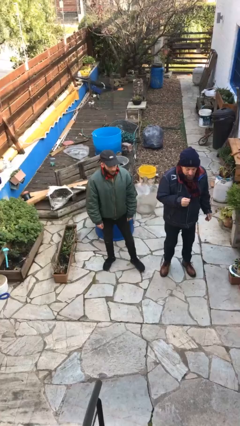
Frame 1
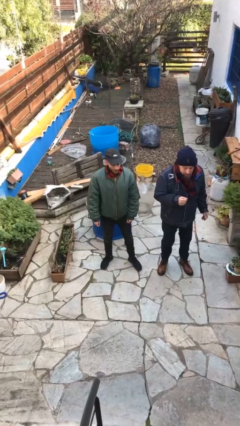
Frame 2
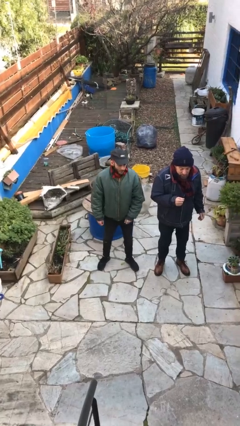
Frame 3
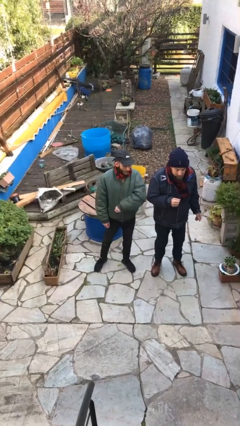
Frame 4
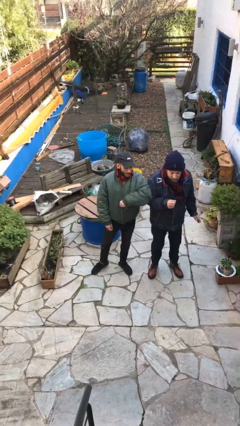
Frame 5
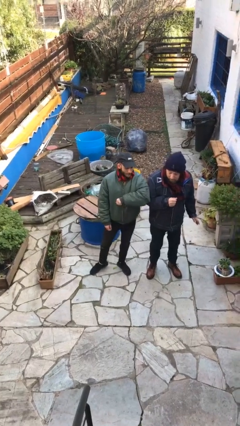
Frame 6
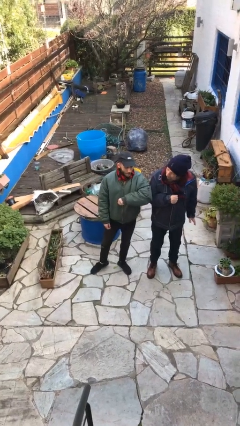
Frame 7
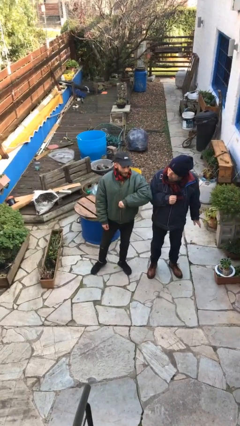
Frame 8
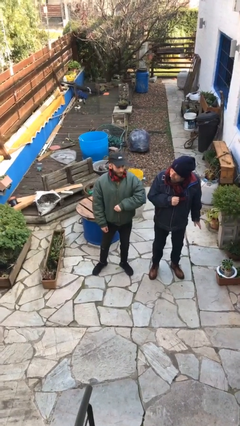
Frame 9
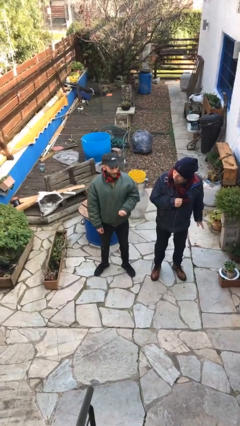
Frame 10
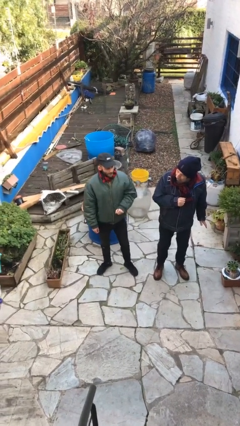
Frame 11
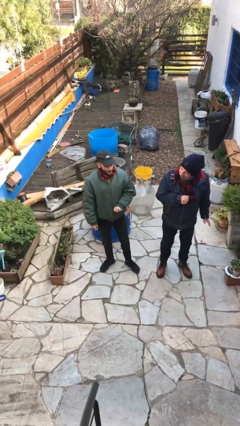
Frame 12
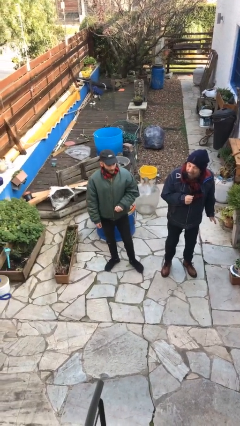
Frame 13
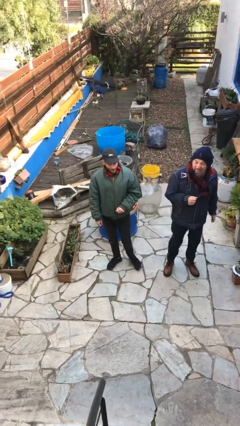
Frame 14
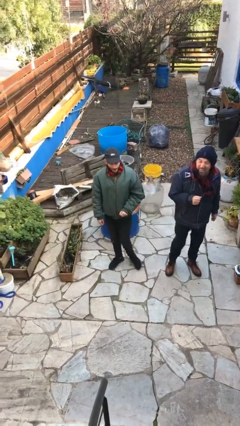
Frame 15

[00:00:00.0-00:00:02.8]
person nudges person with elbow

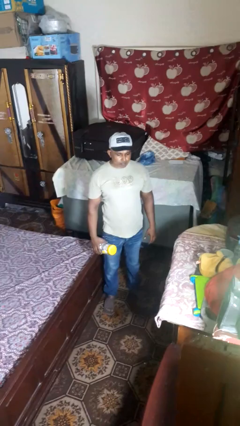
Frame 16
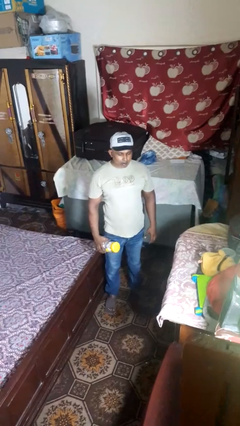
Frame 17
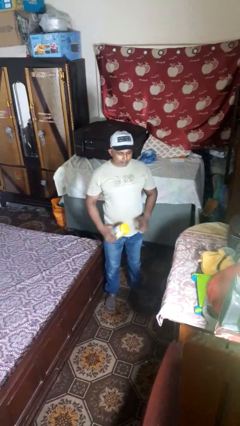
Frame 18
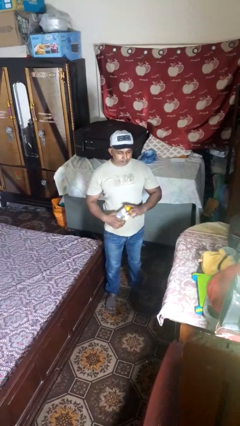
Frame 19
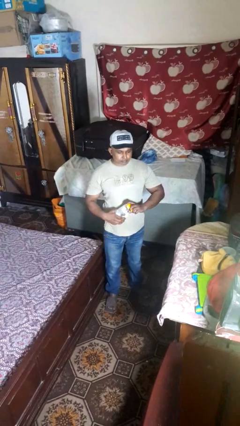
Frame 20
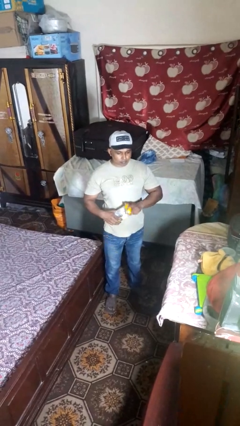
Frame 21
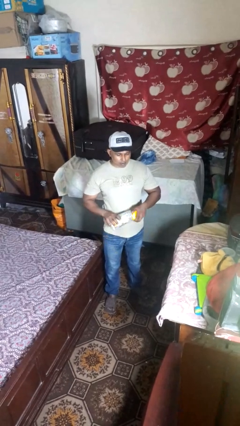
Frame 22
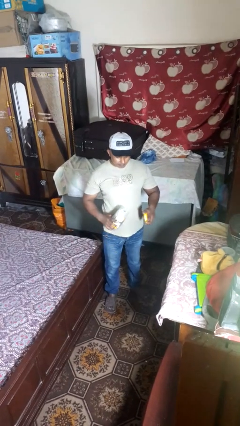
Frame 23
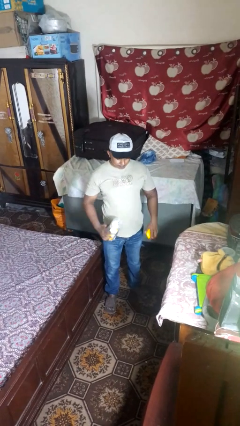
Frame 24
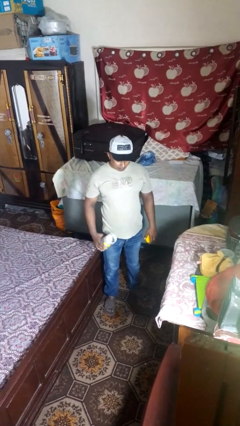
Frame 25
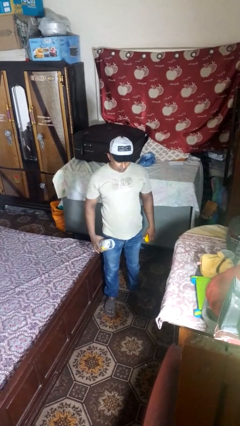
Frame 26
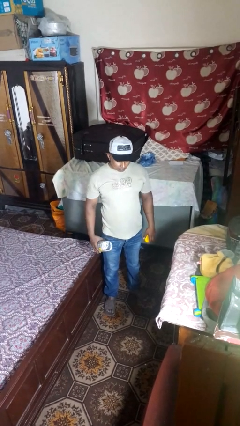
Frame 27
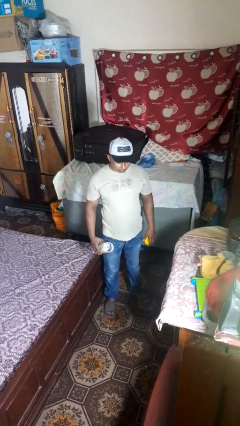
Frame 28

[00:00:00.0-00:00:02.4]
person opens jar

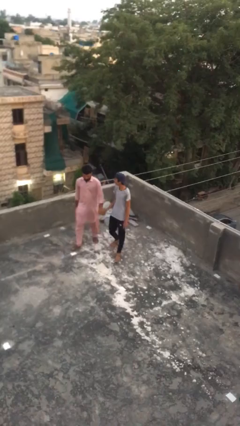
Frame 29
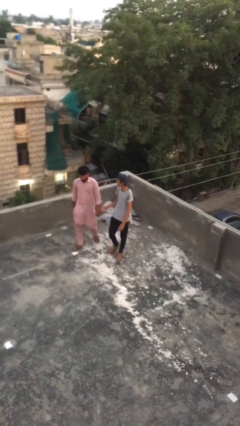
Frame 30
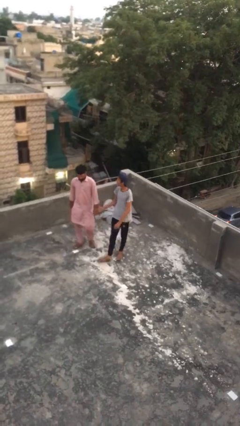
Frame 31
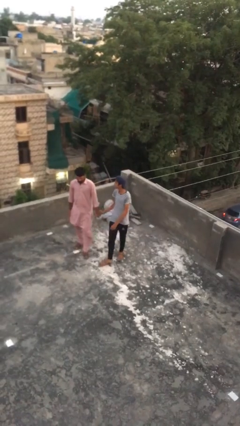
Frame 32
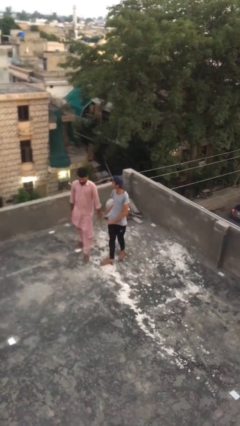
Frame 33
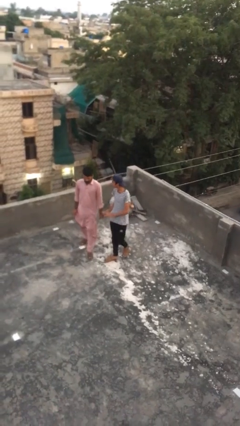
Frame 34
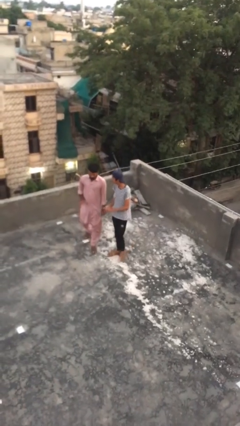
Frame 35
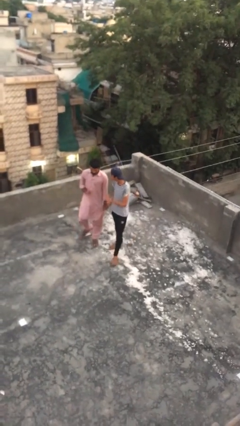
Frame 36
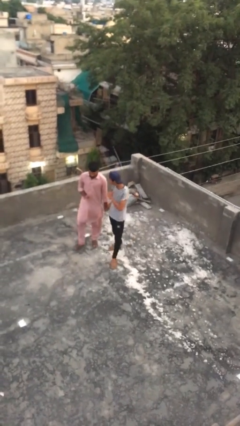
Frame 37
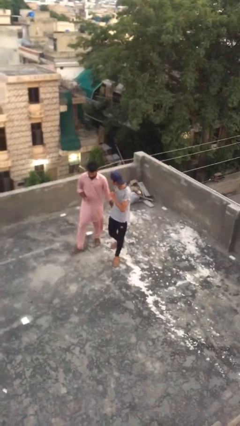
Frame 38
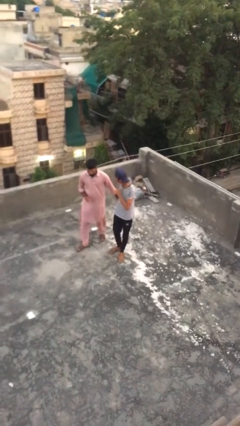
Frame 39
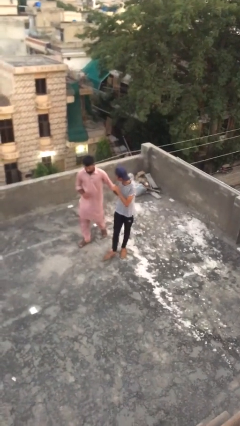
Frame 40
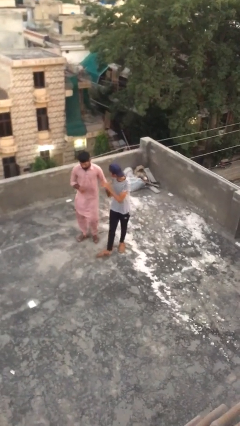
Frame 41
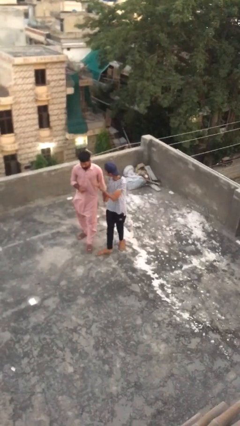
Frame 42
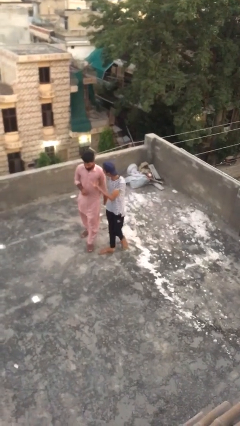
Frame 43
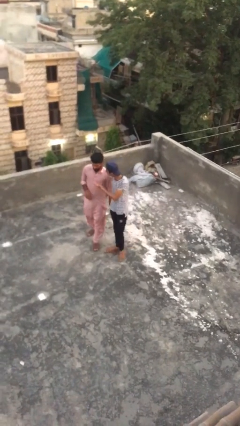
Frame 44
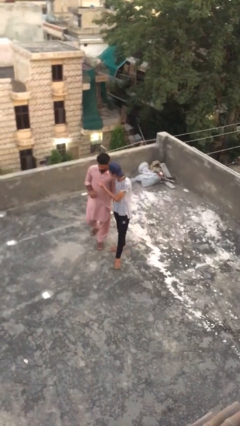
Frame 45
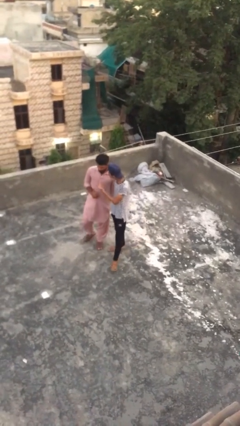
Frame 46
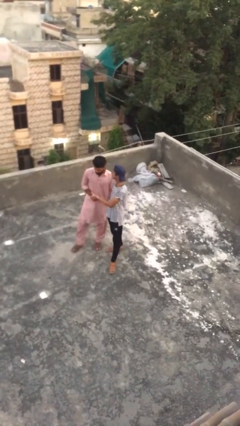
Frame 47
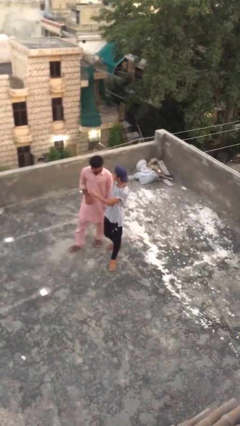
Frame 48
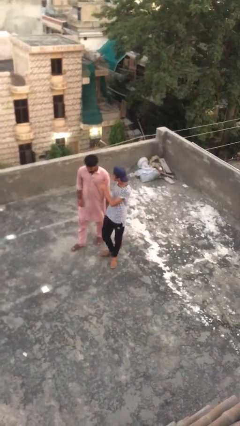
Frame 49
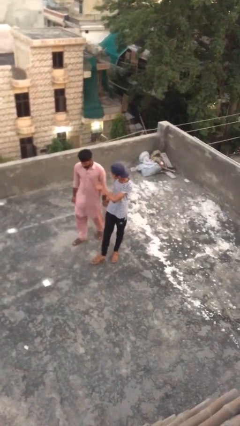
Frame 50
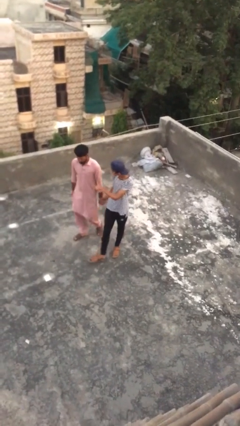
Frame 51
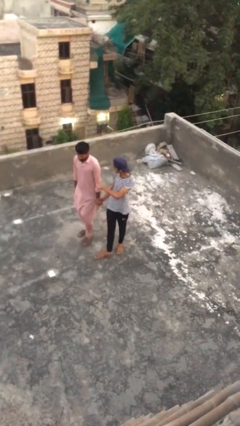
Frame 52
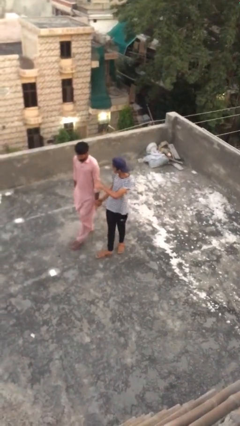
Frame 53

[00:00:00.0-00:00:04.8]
person holds hand

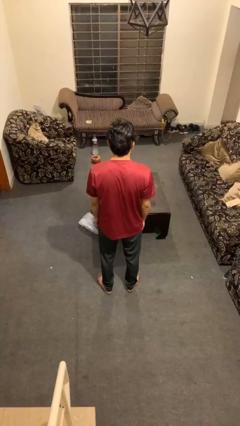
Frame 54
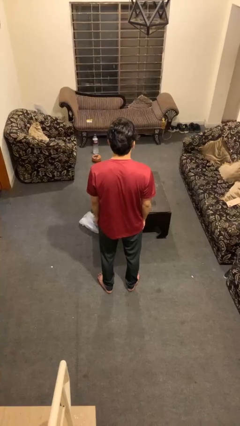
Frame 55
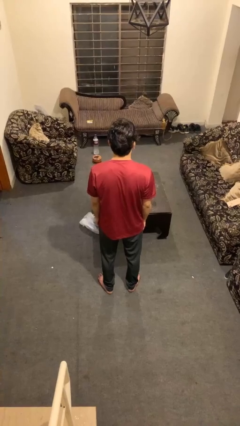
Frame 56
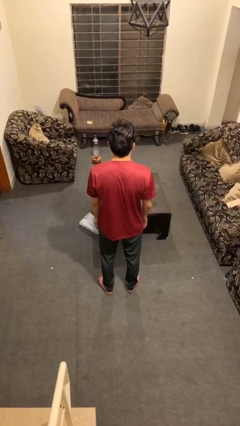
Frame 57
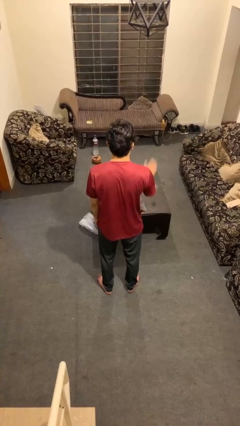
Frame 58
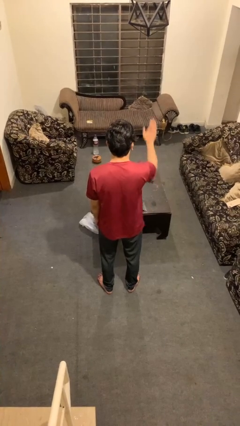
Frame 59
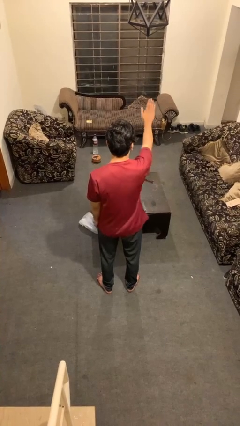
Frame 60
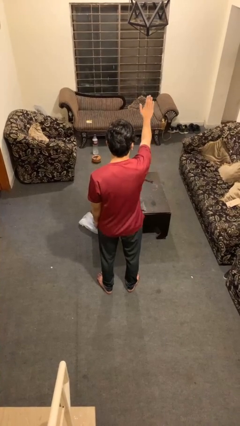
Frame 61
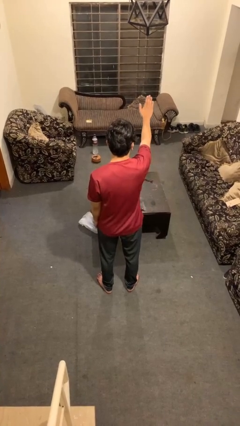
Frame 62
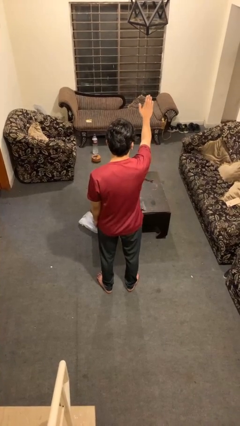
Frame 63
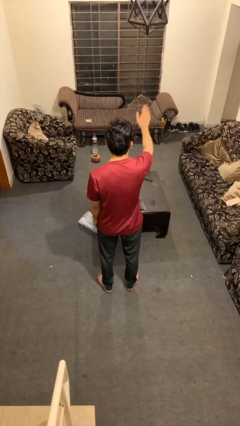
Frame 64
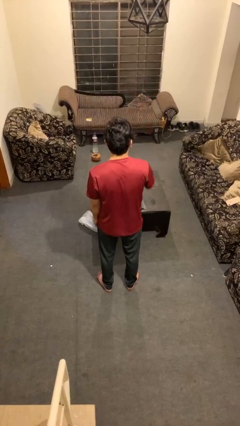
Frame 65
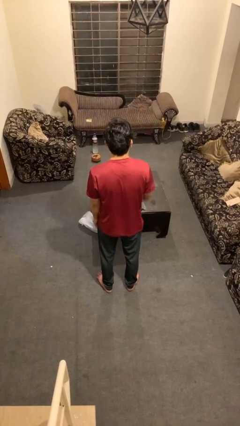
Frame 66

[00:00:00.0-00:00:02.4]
person gestures stop

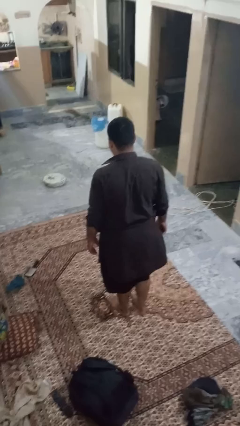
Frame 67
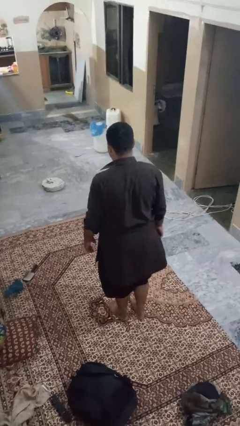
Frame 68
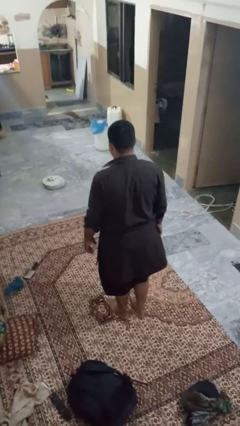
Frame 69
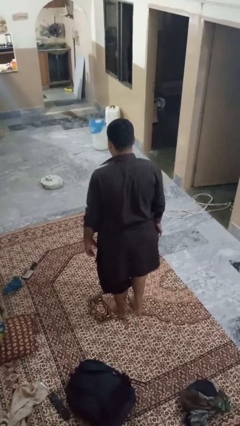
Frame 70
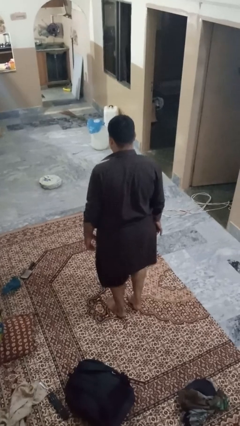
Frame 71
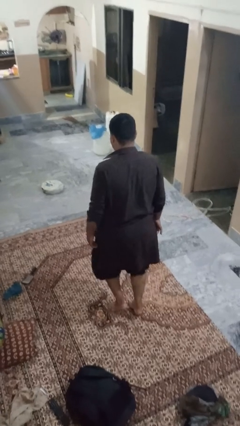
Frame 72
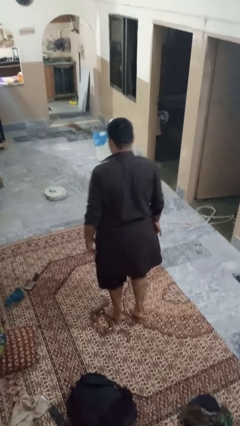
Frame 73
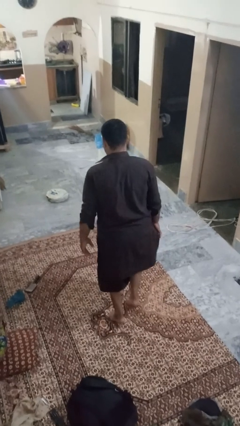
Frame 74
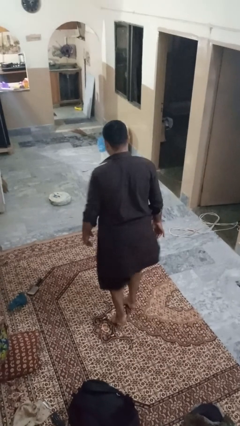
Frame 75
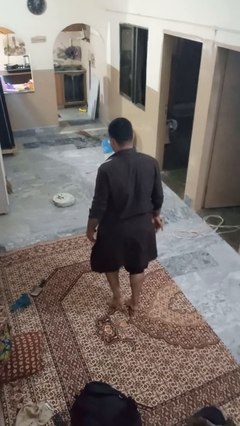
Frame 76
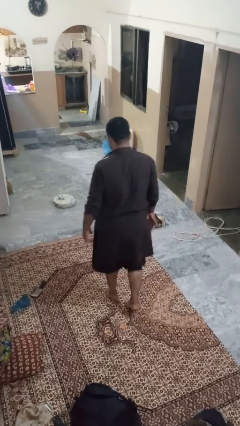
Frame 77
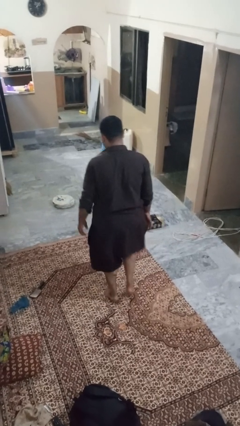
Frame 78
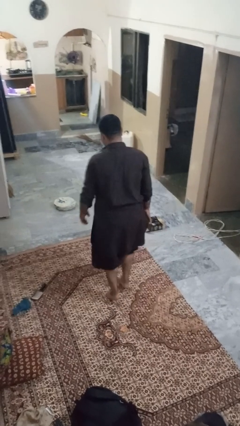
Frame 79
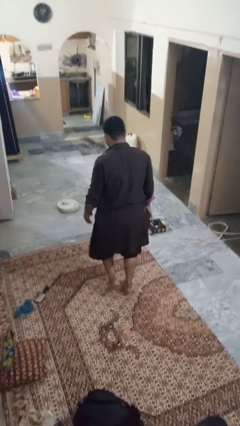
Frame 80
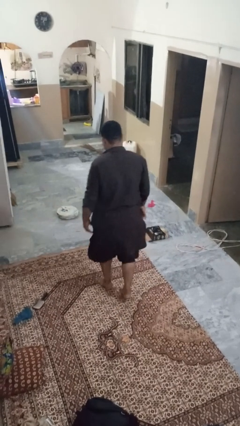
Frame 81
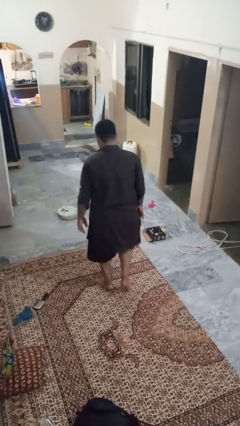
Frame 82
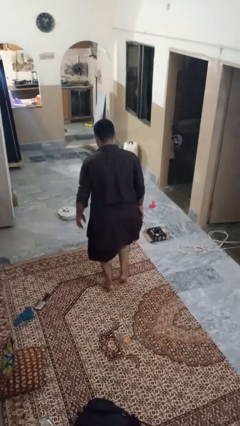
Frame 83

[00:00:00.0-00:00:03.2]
person walks tiptoe

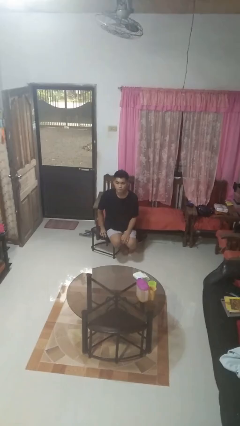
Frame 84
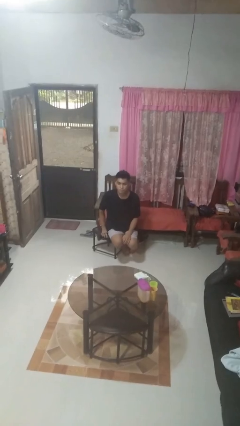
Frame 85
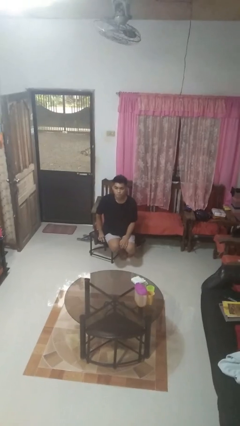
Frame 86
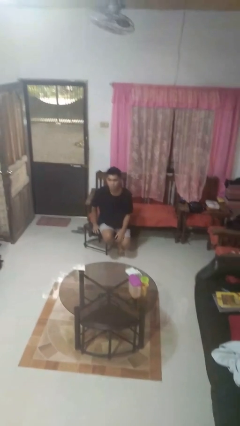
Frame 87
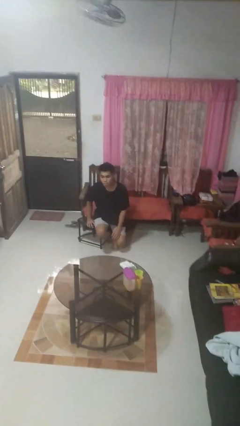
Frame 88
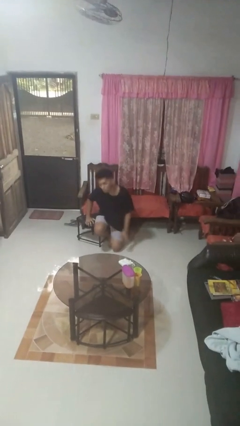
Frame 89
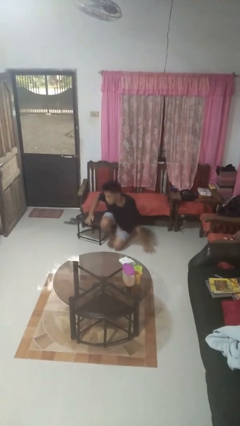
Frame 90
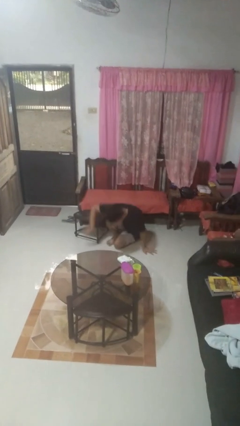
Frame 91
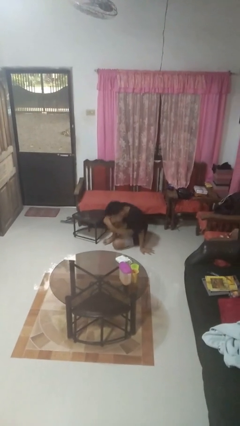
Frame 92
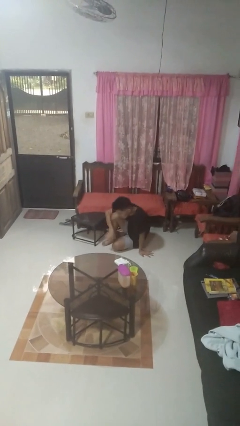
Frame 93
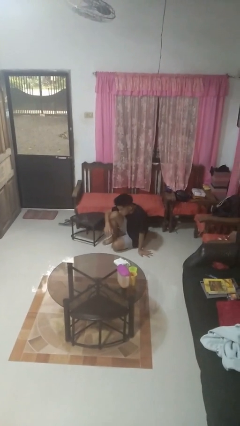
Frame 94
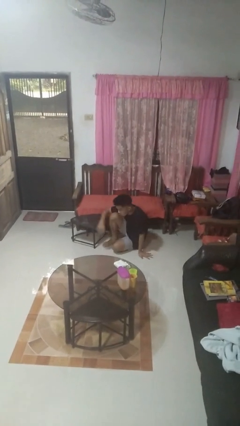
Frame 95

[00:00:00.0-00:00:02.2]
person falls from chair
